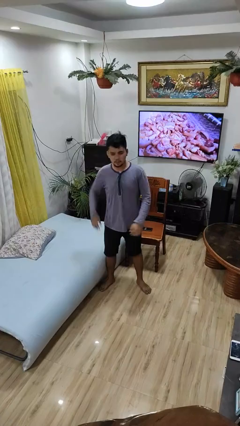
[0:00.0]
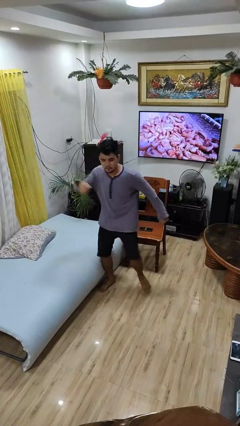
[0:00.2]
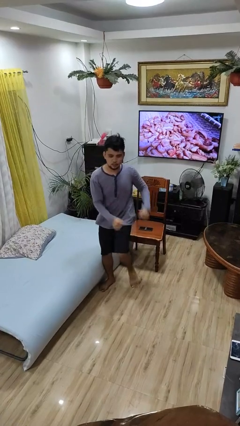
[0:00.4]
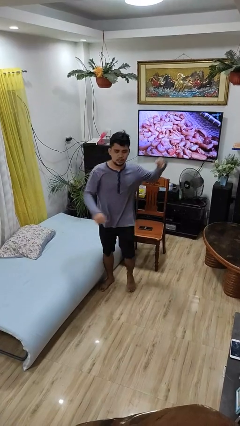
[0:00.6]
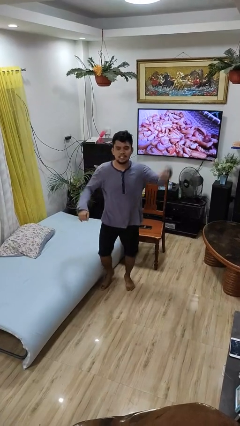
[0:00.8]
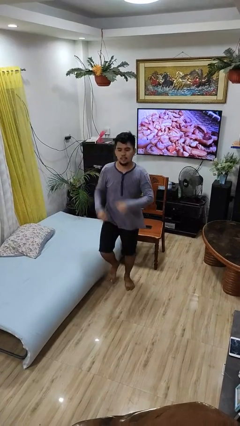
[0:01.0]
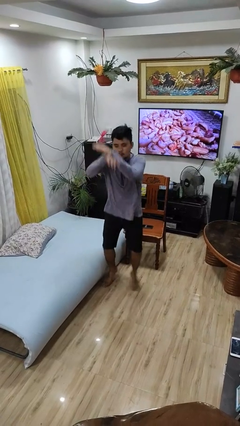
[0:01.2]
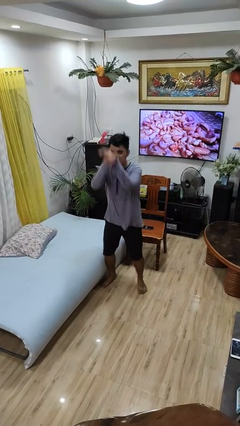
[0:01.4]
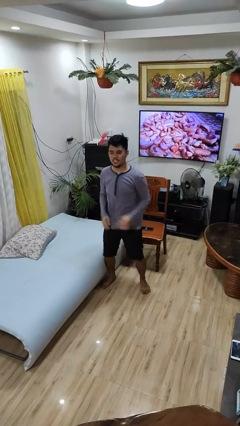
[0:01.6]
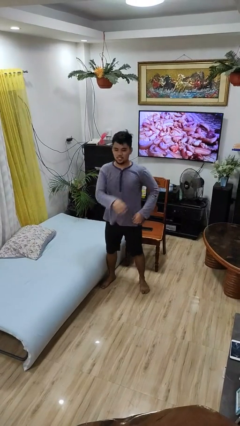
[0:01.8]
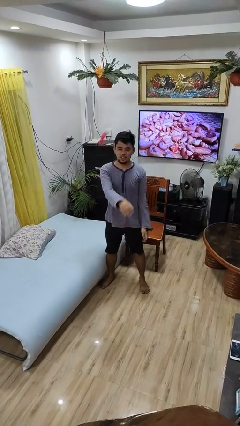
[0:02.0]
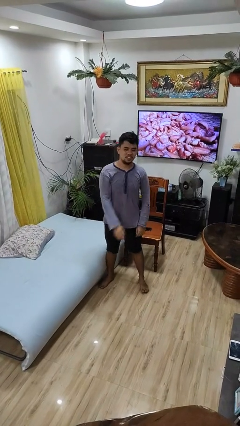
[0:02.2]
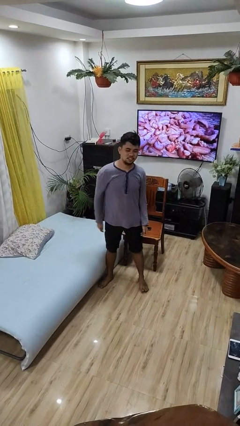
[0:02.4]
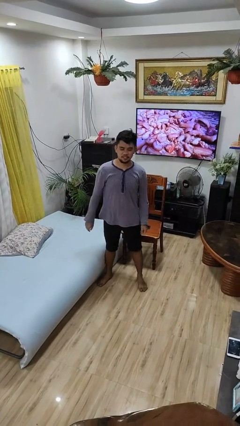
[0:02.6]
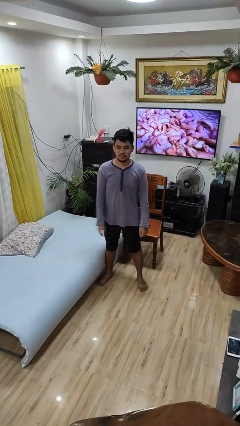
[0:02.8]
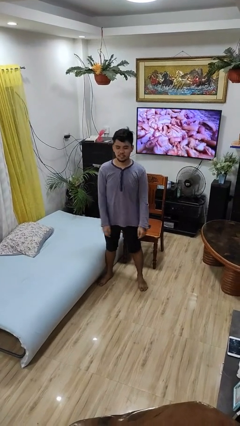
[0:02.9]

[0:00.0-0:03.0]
person dances in place

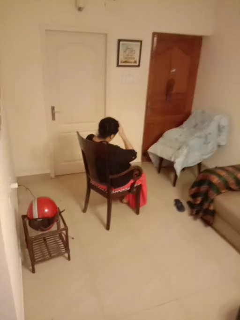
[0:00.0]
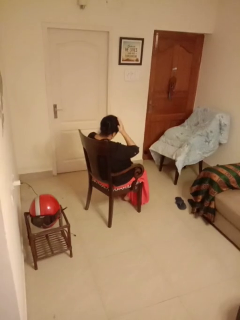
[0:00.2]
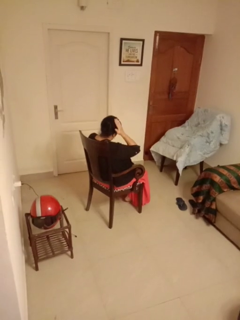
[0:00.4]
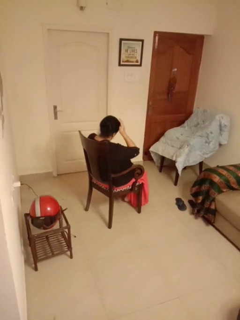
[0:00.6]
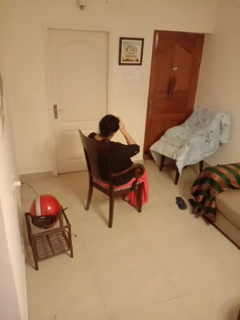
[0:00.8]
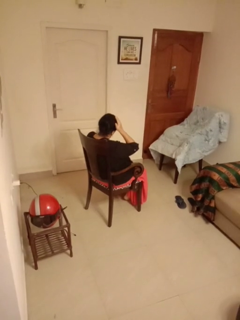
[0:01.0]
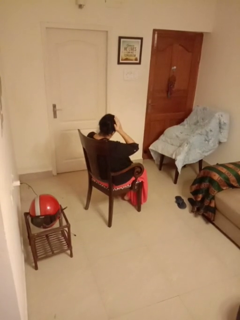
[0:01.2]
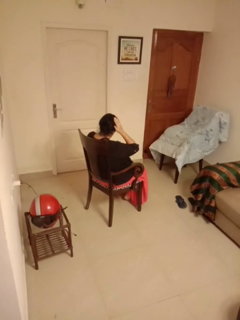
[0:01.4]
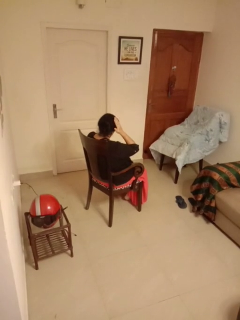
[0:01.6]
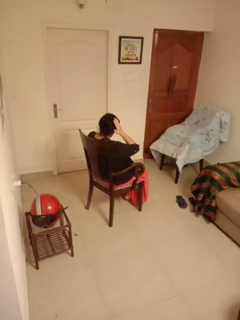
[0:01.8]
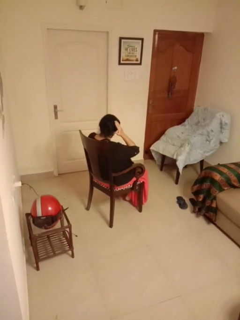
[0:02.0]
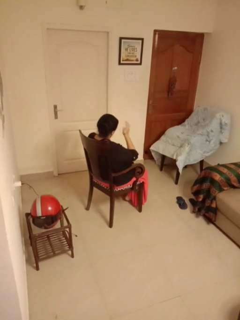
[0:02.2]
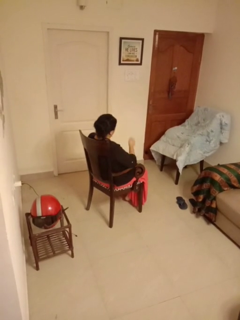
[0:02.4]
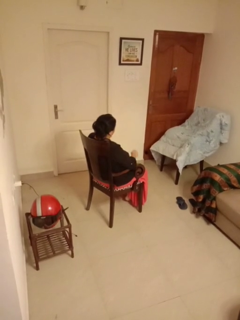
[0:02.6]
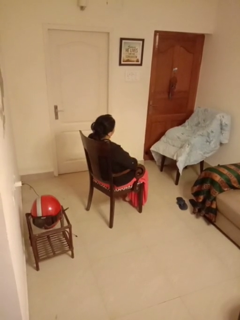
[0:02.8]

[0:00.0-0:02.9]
person strokes hair

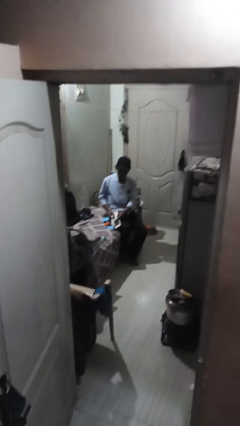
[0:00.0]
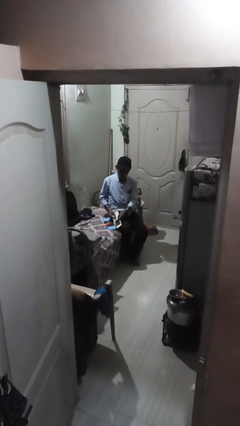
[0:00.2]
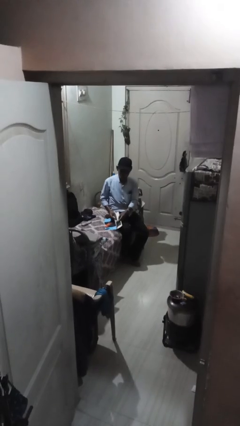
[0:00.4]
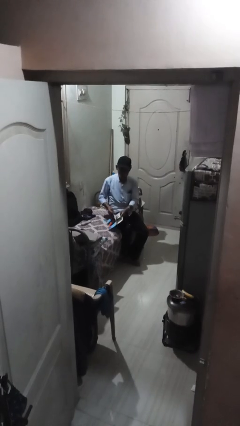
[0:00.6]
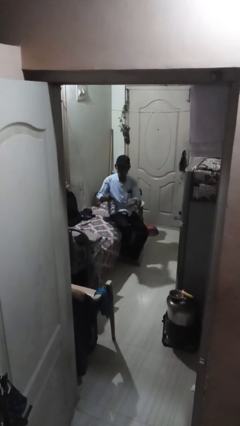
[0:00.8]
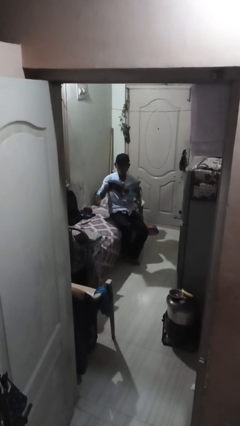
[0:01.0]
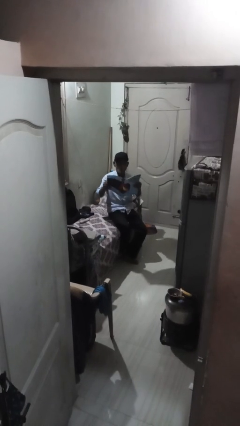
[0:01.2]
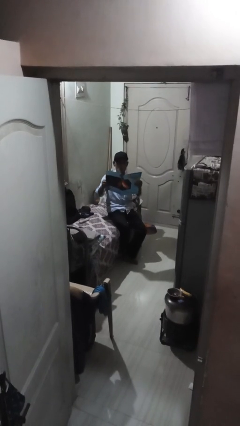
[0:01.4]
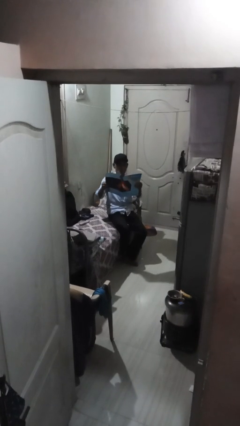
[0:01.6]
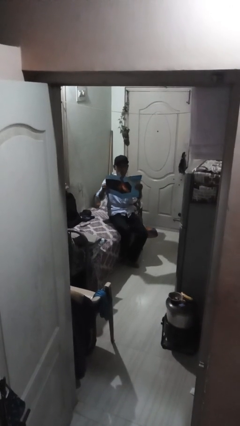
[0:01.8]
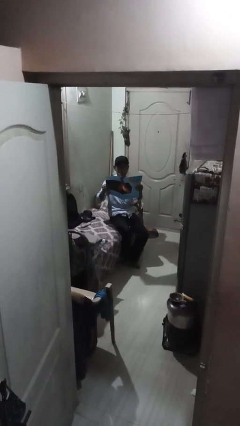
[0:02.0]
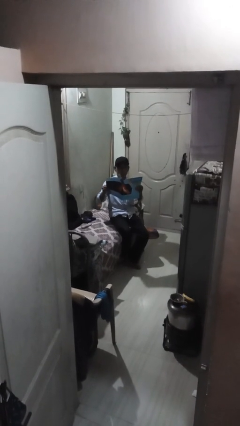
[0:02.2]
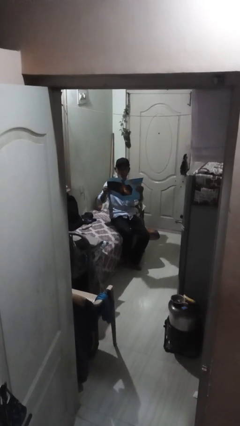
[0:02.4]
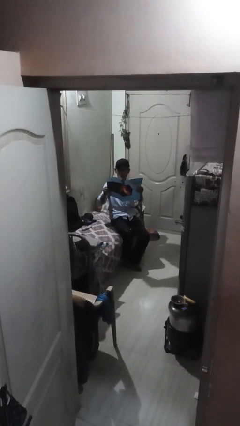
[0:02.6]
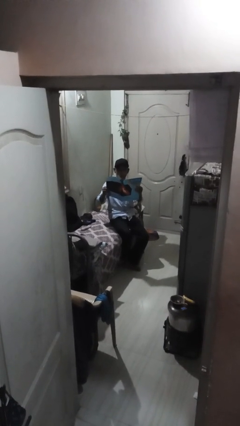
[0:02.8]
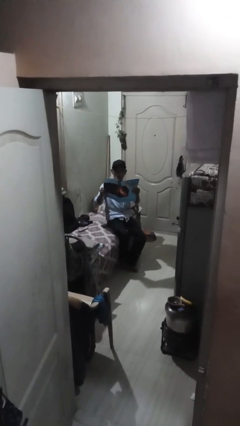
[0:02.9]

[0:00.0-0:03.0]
person reads magazine

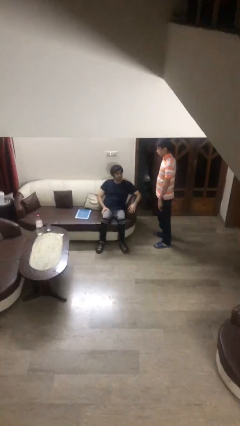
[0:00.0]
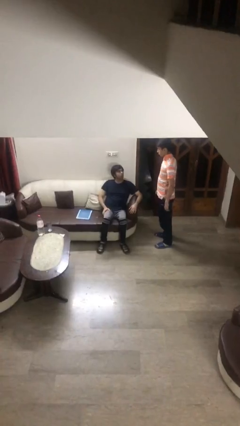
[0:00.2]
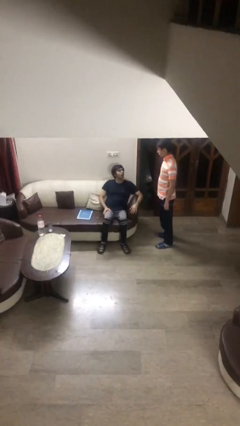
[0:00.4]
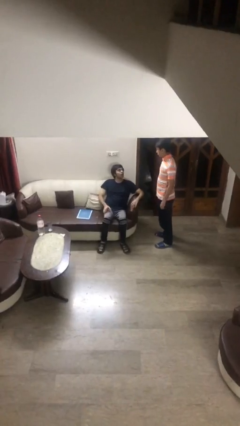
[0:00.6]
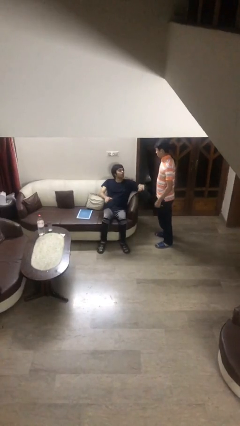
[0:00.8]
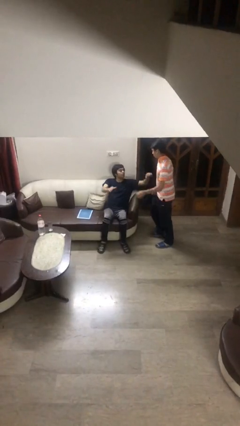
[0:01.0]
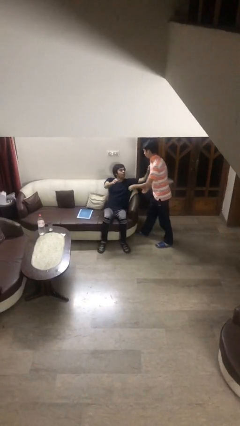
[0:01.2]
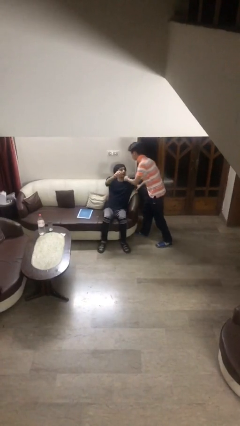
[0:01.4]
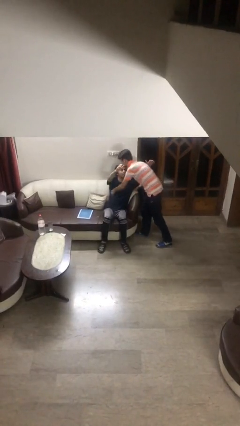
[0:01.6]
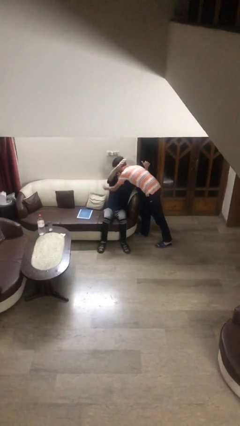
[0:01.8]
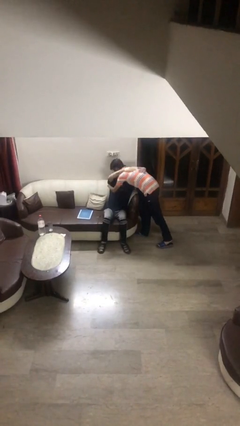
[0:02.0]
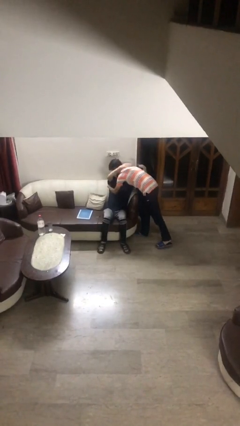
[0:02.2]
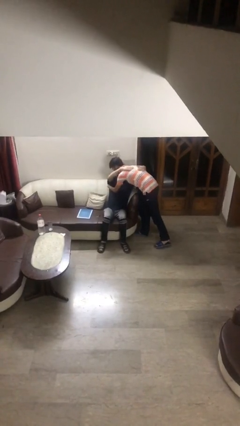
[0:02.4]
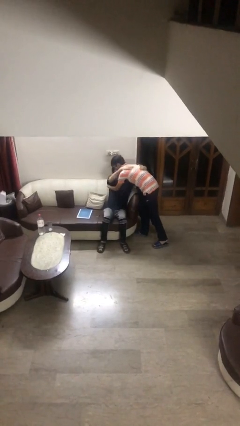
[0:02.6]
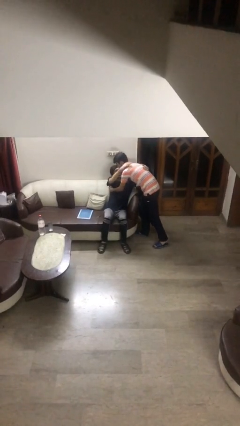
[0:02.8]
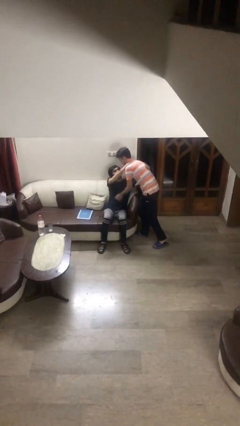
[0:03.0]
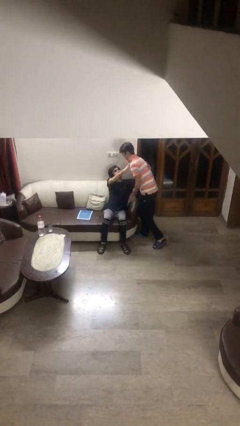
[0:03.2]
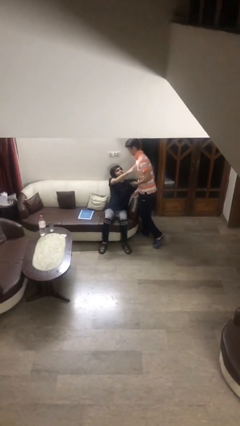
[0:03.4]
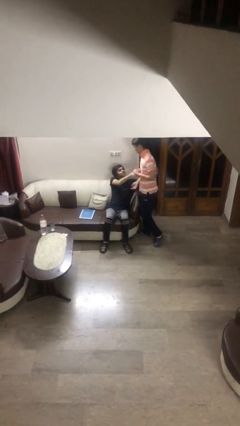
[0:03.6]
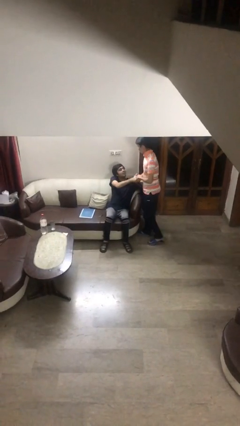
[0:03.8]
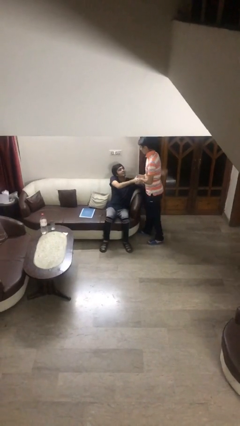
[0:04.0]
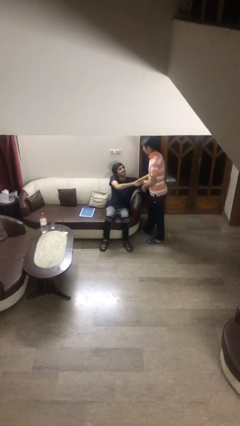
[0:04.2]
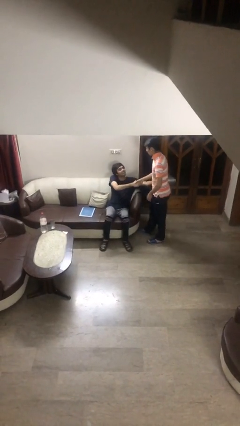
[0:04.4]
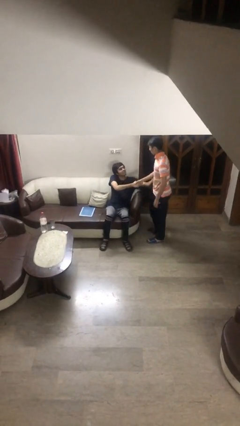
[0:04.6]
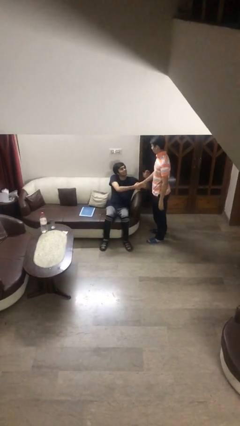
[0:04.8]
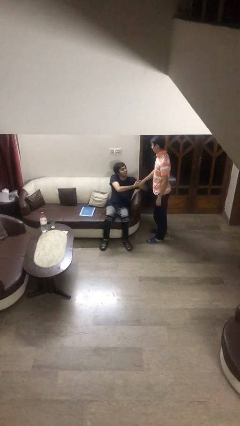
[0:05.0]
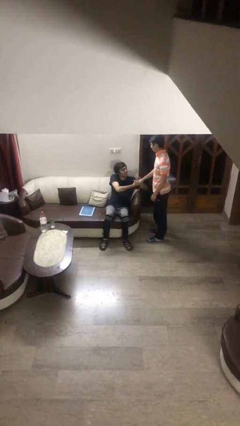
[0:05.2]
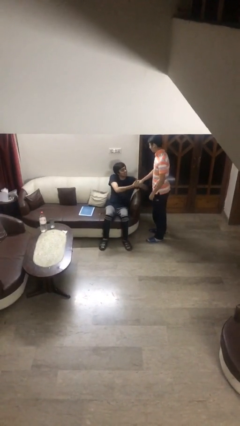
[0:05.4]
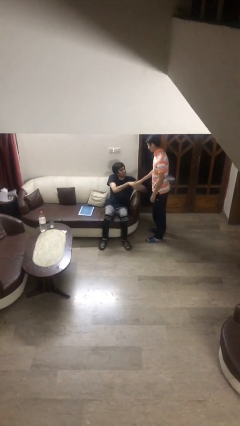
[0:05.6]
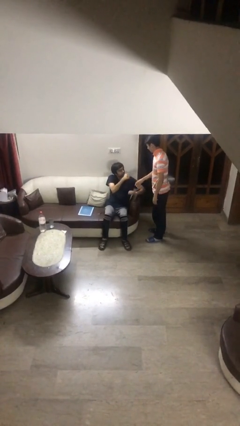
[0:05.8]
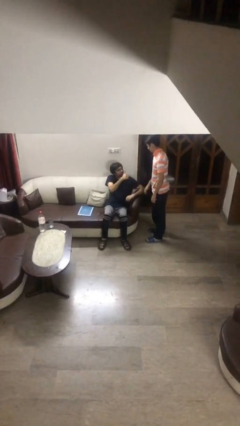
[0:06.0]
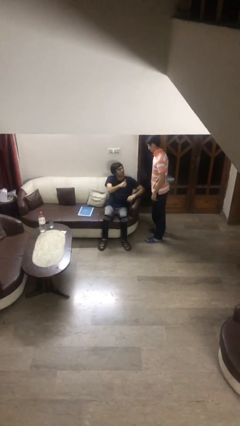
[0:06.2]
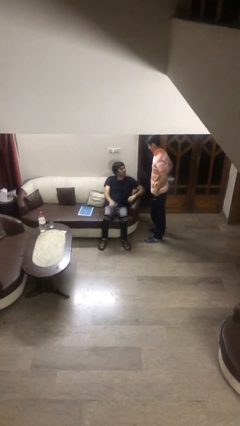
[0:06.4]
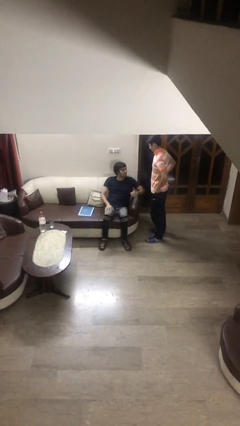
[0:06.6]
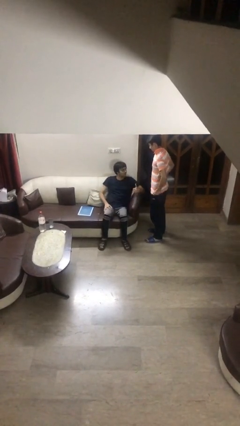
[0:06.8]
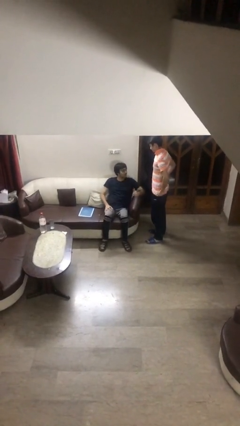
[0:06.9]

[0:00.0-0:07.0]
person embraces person

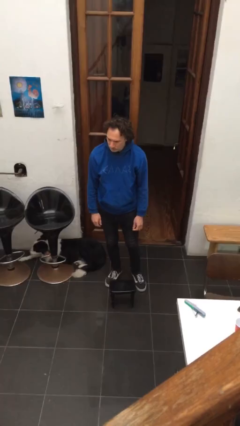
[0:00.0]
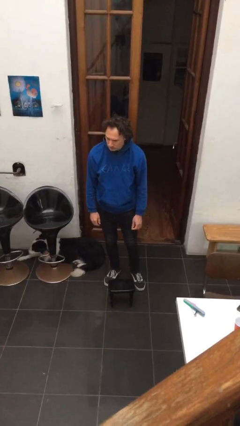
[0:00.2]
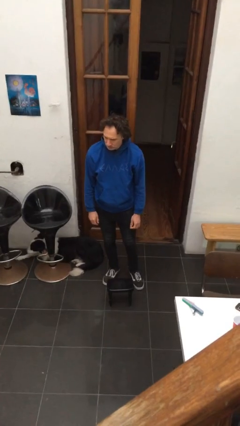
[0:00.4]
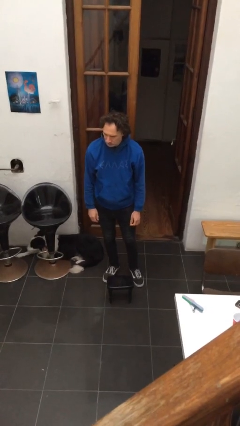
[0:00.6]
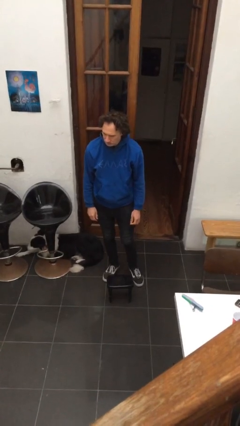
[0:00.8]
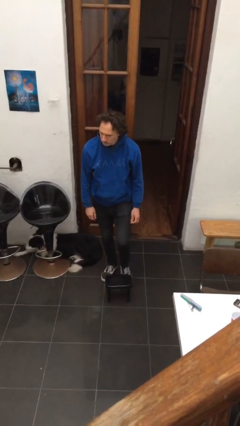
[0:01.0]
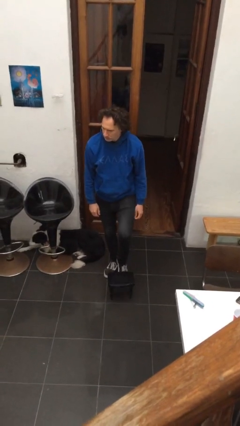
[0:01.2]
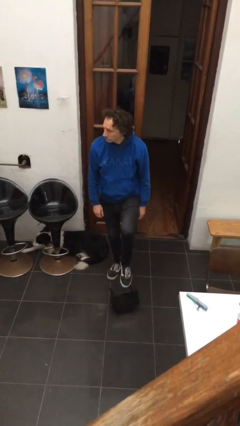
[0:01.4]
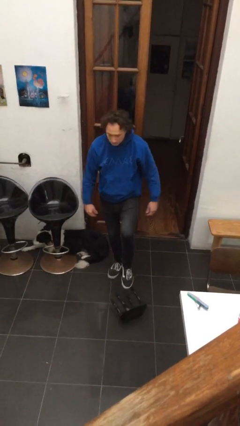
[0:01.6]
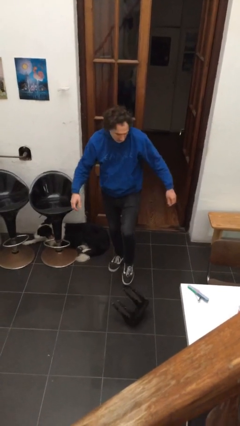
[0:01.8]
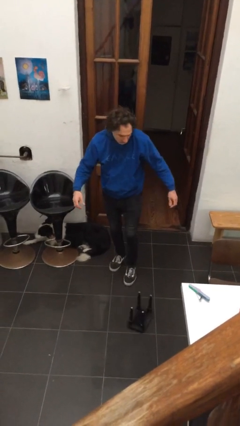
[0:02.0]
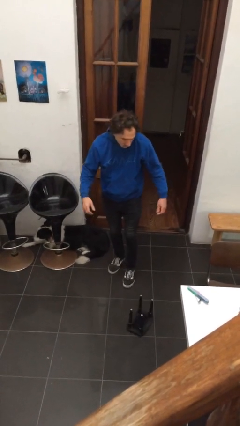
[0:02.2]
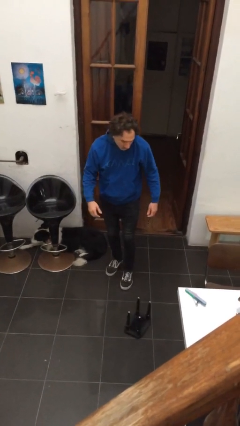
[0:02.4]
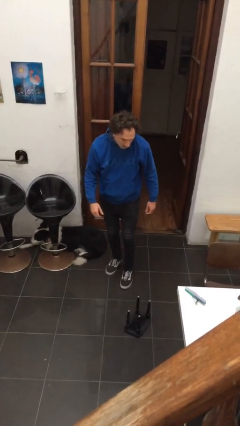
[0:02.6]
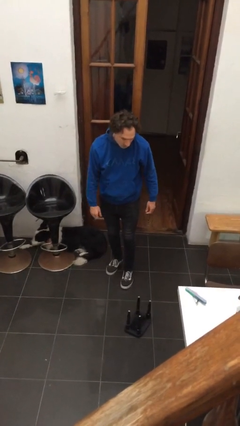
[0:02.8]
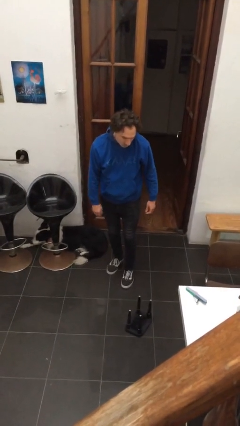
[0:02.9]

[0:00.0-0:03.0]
person knocks over furniture
